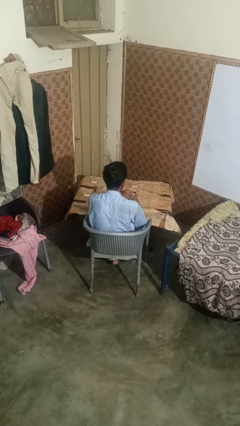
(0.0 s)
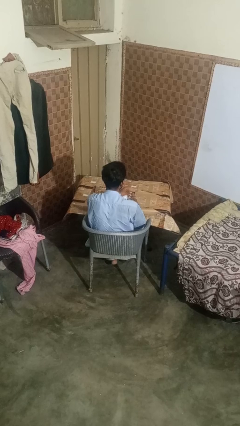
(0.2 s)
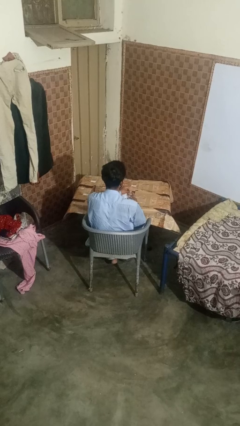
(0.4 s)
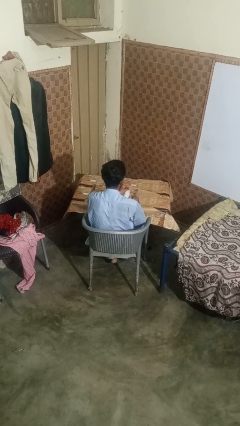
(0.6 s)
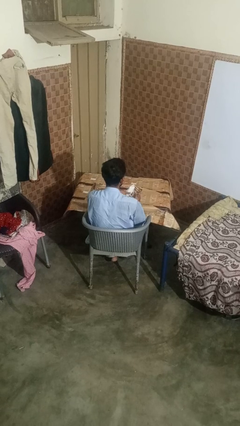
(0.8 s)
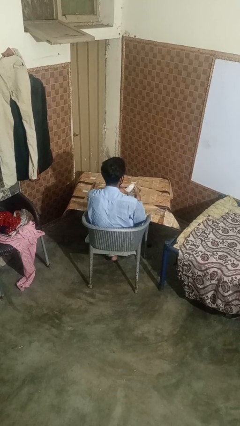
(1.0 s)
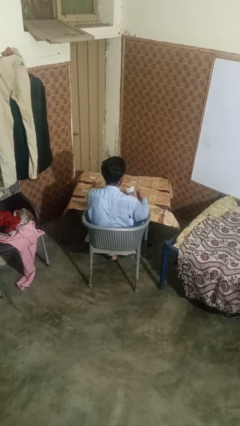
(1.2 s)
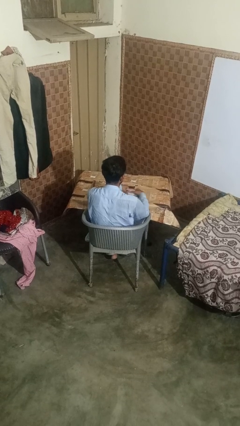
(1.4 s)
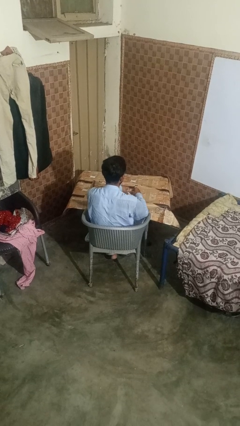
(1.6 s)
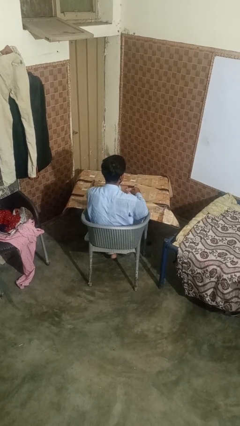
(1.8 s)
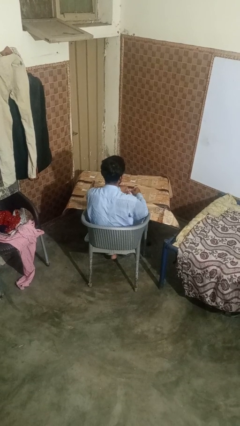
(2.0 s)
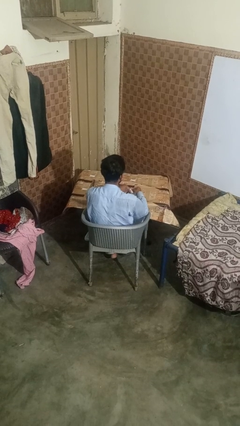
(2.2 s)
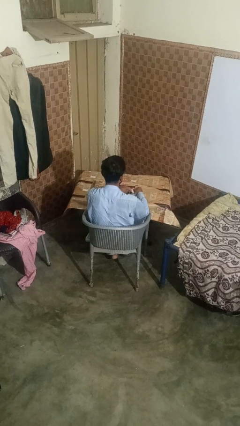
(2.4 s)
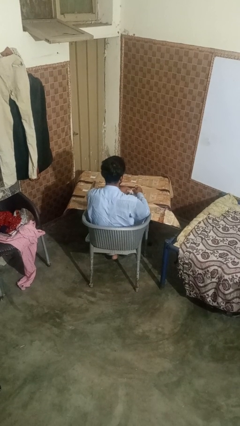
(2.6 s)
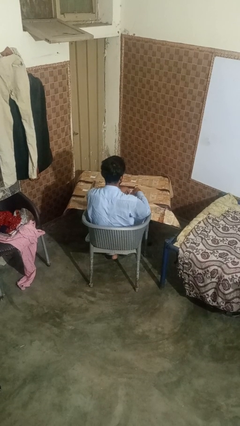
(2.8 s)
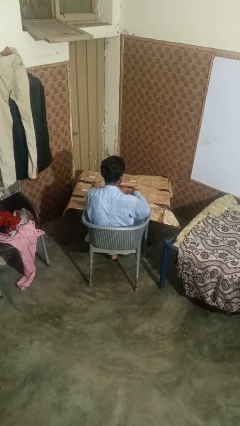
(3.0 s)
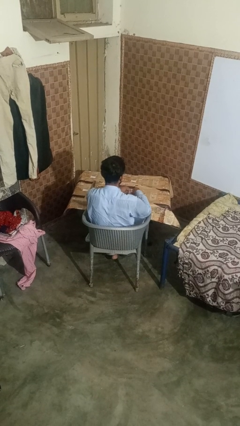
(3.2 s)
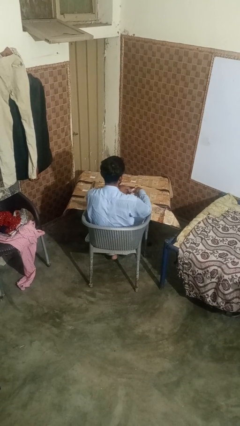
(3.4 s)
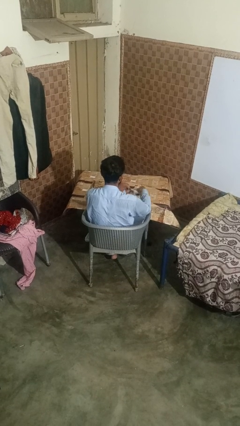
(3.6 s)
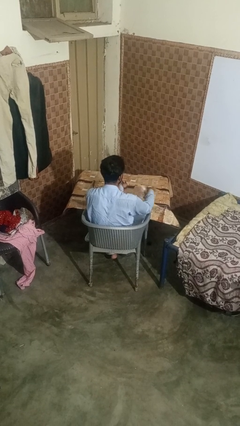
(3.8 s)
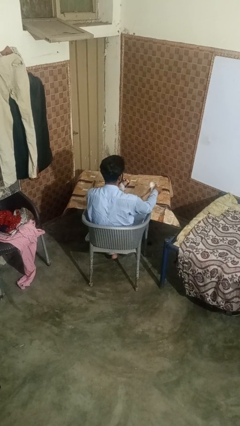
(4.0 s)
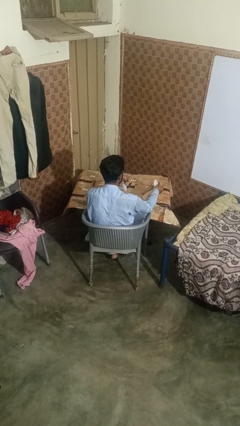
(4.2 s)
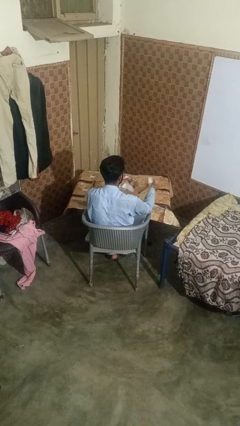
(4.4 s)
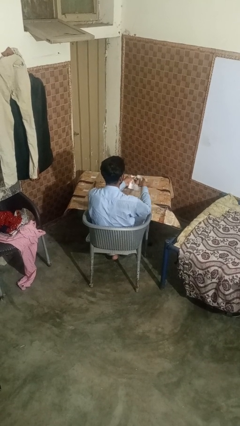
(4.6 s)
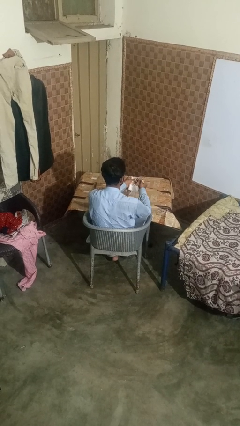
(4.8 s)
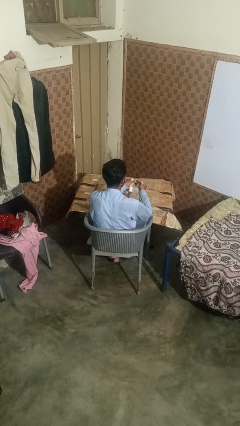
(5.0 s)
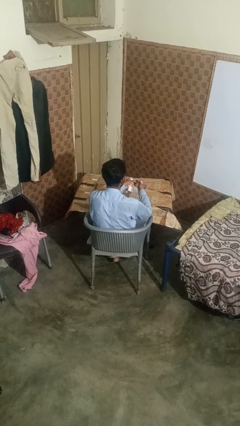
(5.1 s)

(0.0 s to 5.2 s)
person tears paper

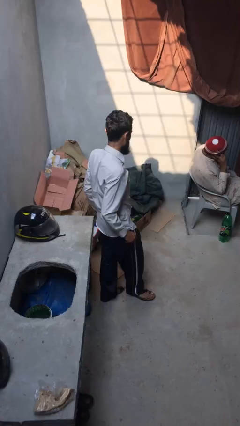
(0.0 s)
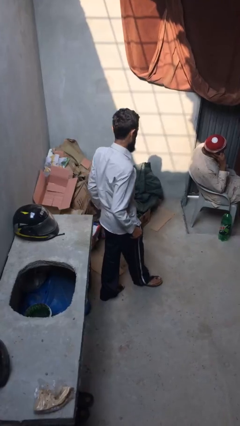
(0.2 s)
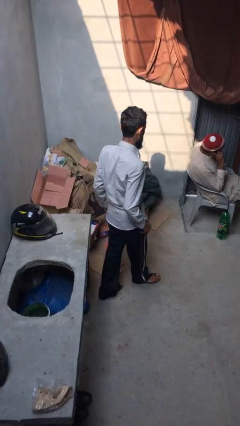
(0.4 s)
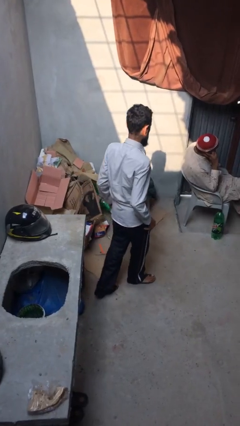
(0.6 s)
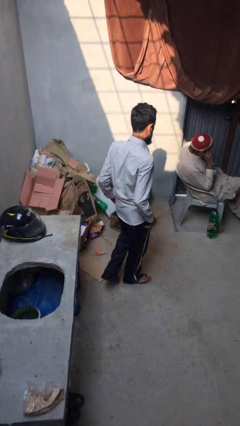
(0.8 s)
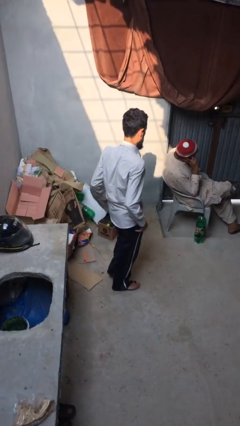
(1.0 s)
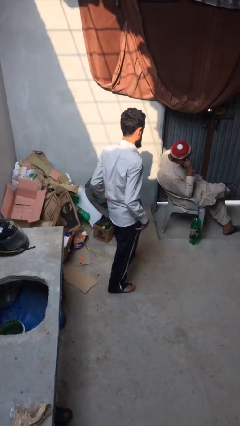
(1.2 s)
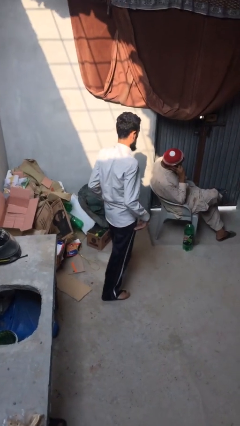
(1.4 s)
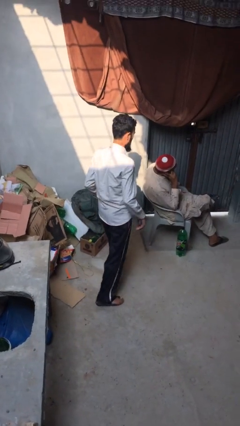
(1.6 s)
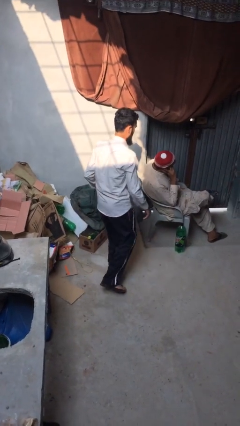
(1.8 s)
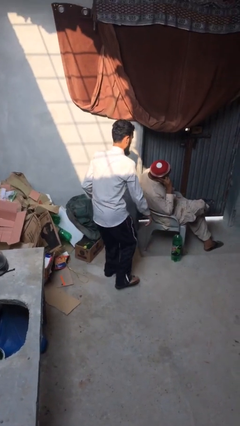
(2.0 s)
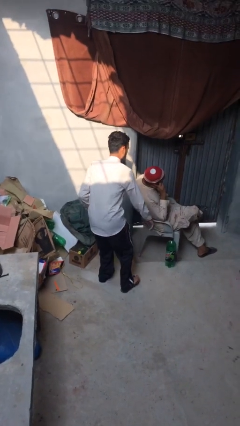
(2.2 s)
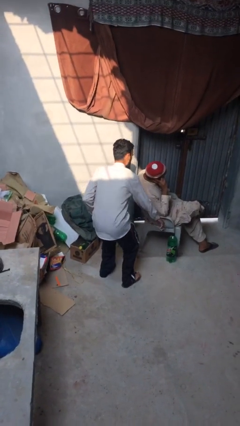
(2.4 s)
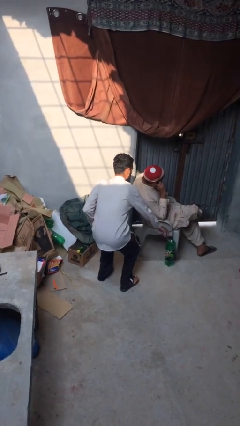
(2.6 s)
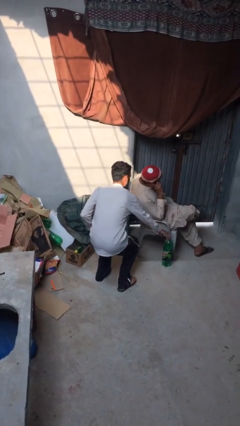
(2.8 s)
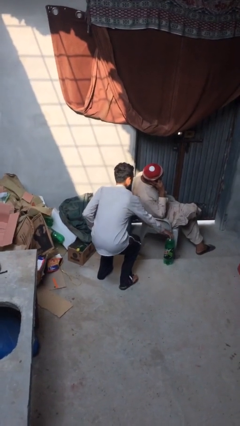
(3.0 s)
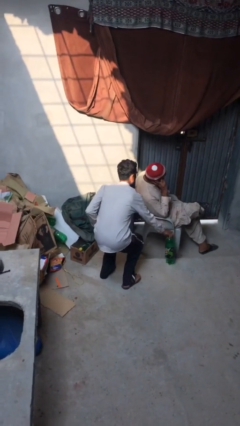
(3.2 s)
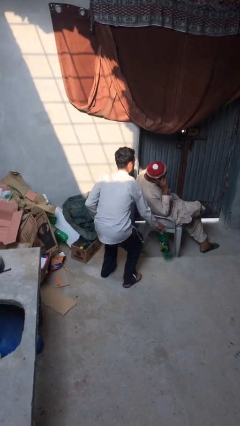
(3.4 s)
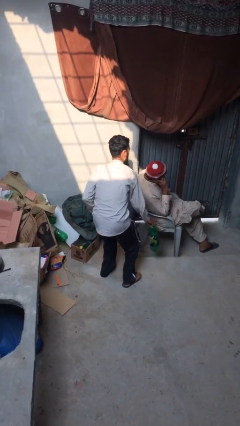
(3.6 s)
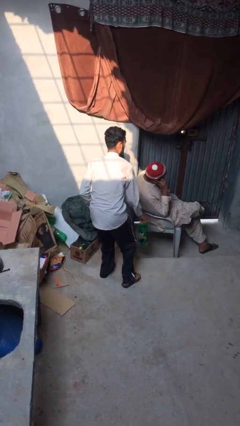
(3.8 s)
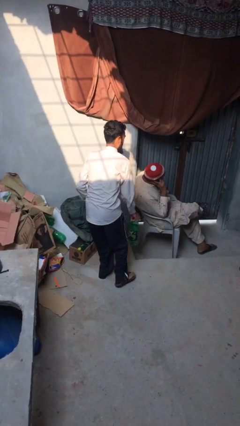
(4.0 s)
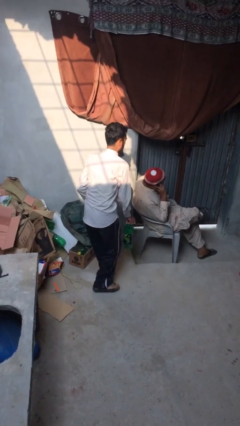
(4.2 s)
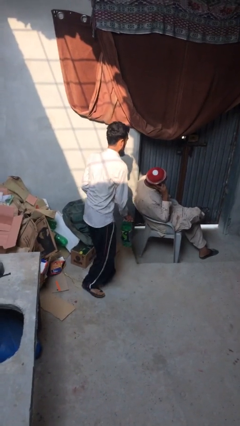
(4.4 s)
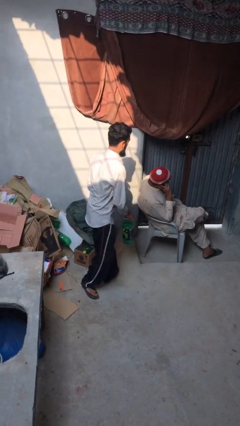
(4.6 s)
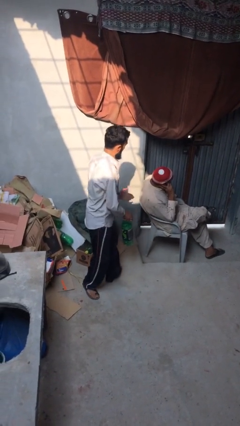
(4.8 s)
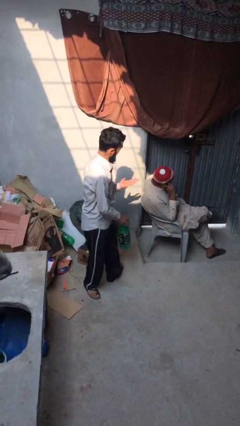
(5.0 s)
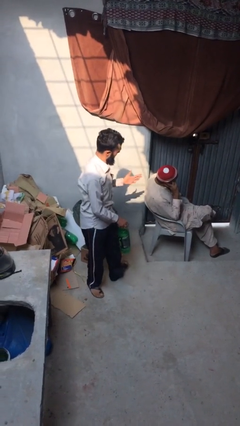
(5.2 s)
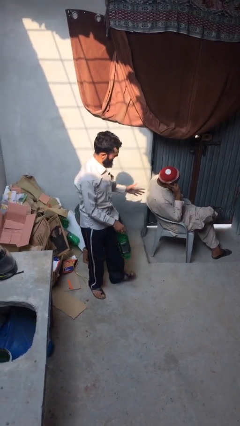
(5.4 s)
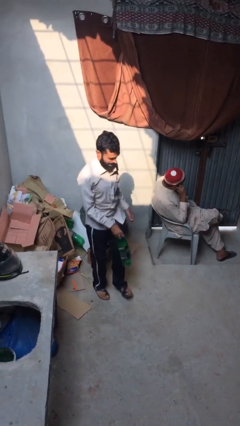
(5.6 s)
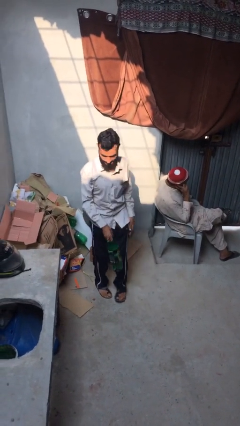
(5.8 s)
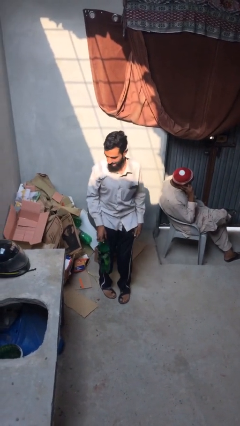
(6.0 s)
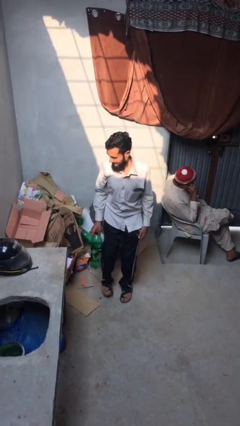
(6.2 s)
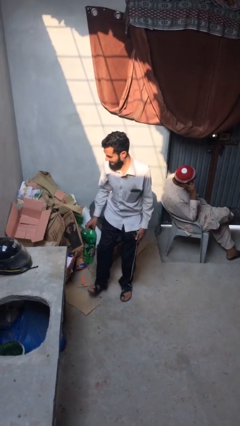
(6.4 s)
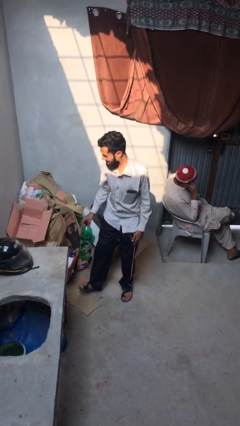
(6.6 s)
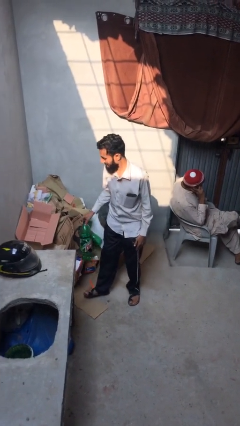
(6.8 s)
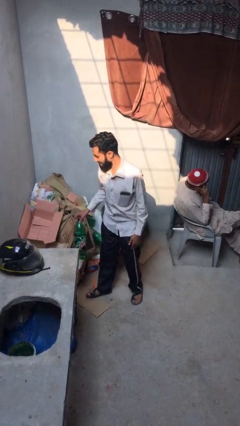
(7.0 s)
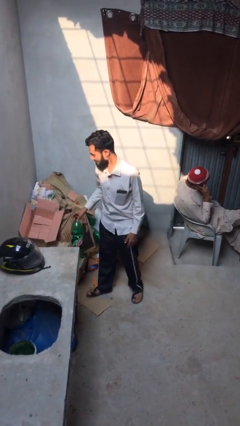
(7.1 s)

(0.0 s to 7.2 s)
person steals object from person

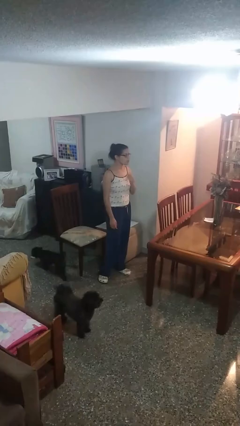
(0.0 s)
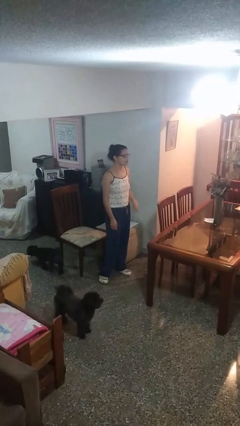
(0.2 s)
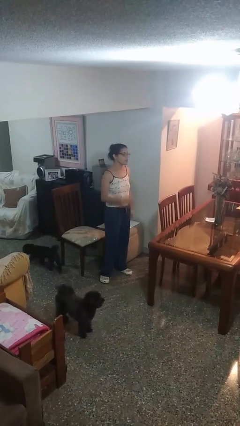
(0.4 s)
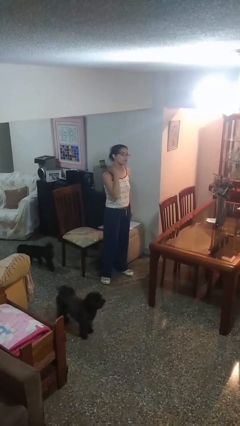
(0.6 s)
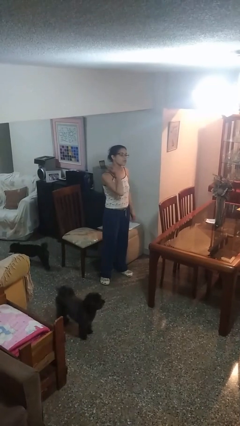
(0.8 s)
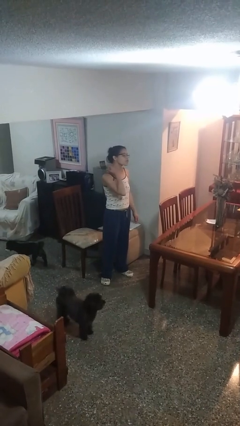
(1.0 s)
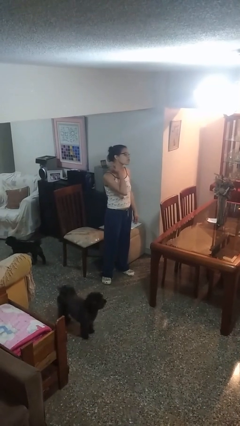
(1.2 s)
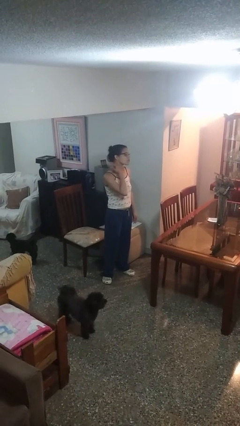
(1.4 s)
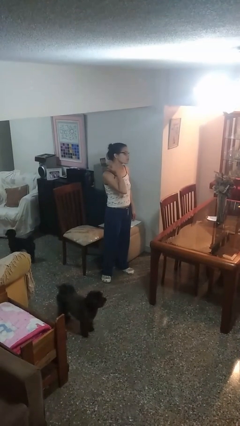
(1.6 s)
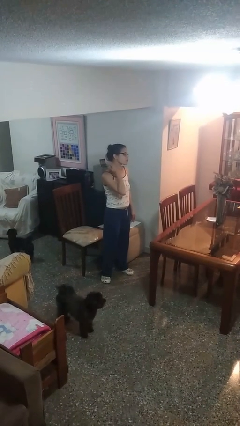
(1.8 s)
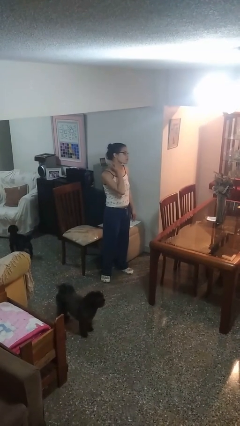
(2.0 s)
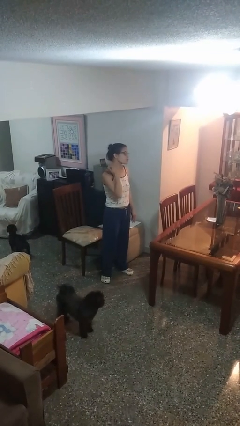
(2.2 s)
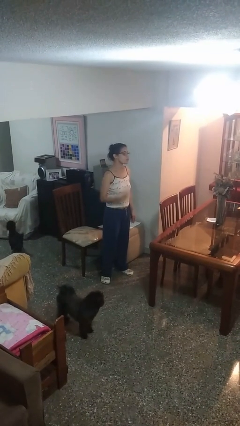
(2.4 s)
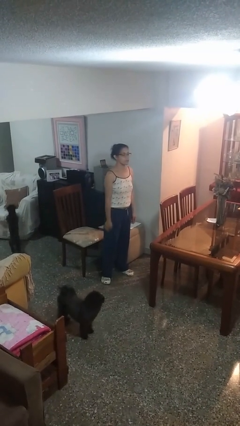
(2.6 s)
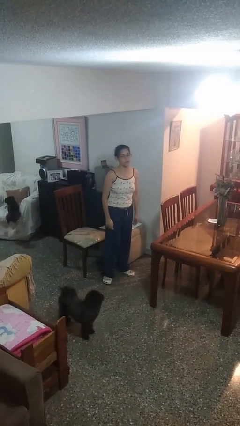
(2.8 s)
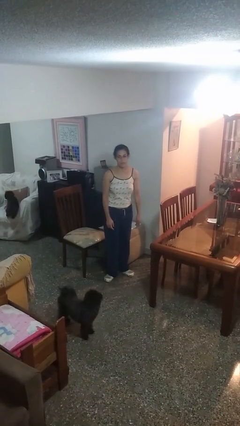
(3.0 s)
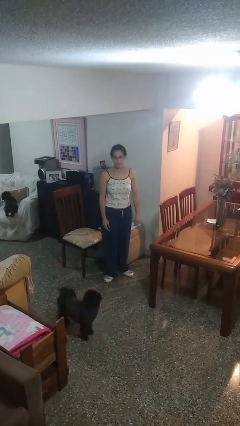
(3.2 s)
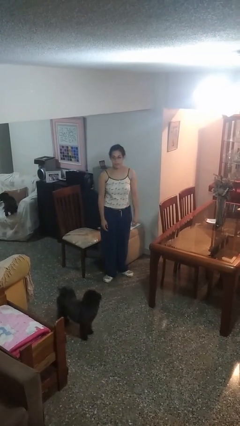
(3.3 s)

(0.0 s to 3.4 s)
person gestures cut

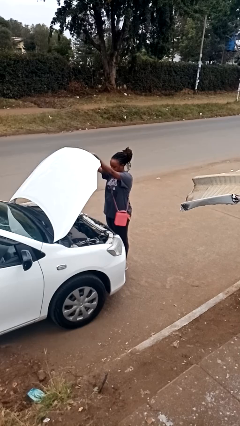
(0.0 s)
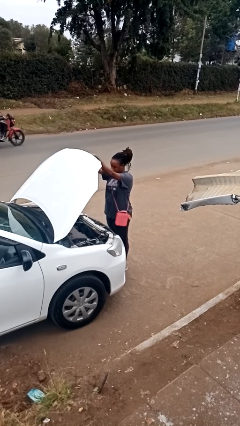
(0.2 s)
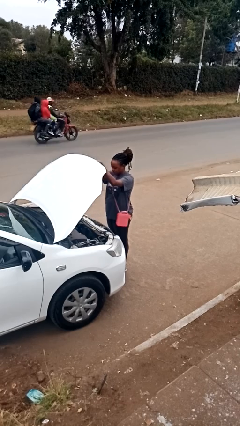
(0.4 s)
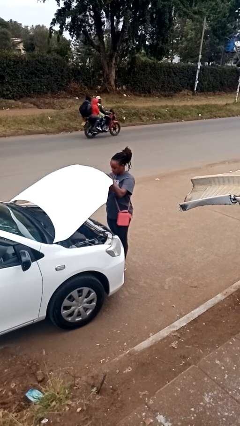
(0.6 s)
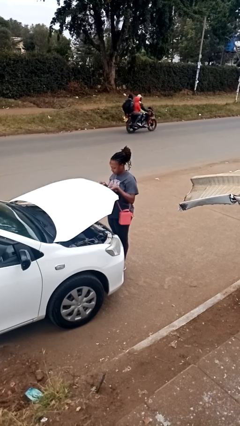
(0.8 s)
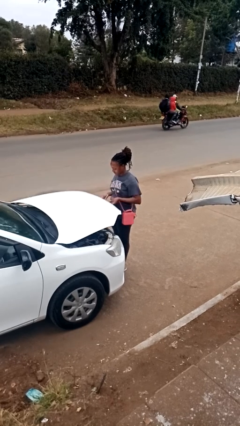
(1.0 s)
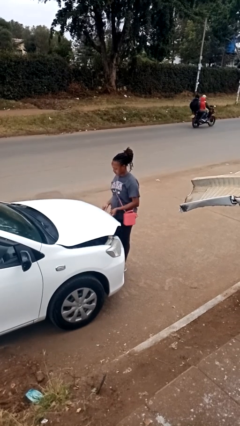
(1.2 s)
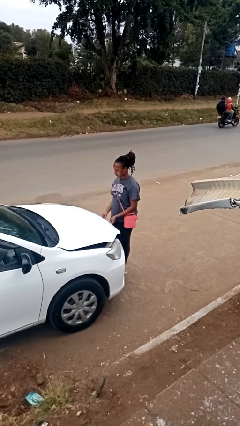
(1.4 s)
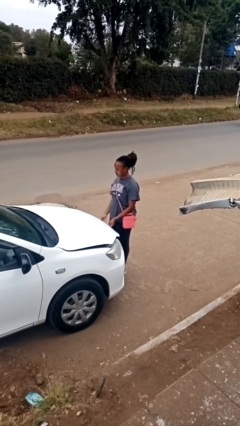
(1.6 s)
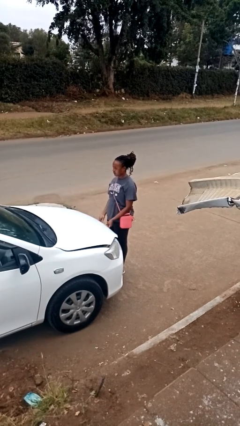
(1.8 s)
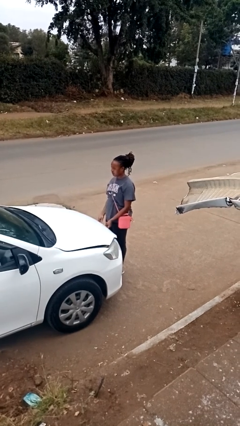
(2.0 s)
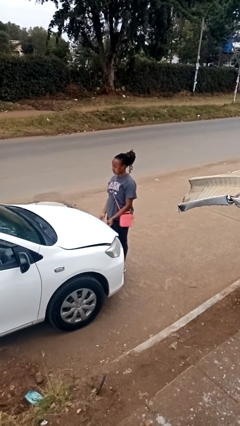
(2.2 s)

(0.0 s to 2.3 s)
person closes car hood
